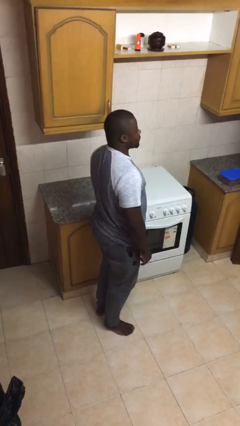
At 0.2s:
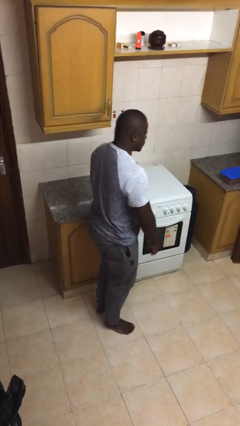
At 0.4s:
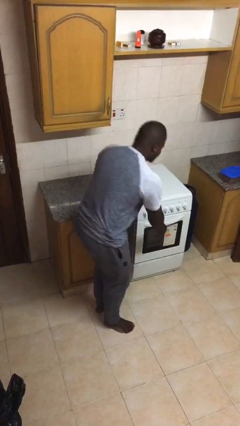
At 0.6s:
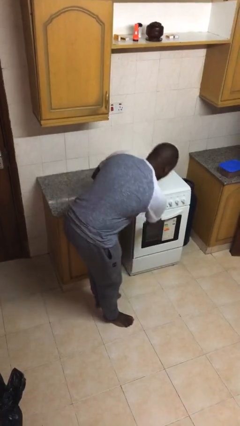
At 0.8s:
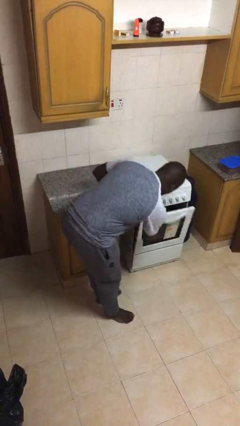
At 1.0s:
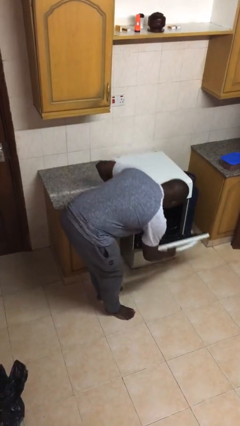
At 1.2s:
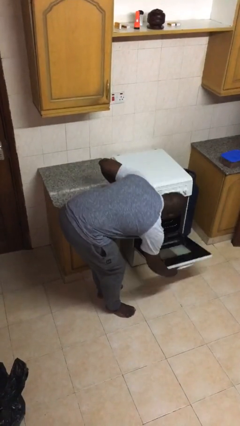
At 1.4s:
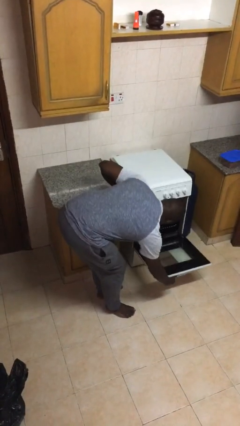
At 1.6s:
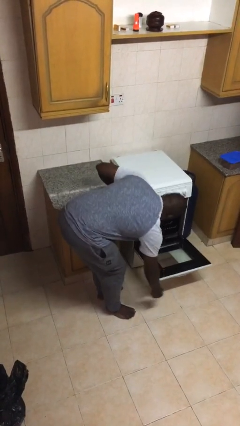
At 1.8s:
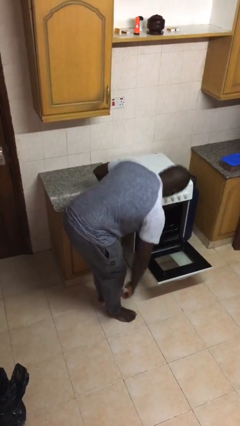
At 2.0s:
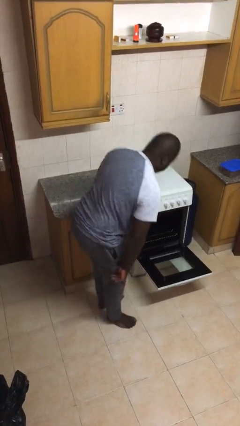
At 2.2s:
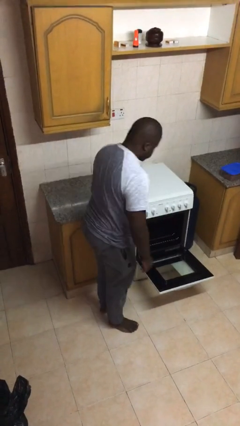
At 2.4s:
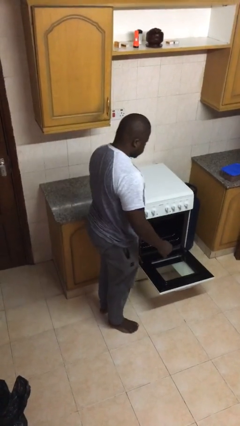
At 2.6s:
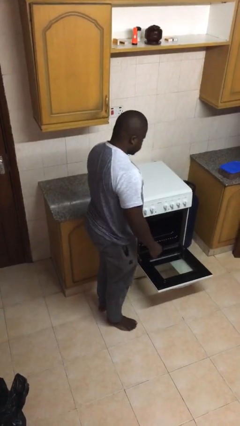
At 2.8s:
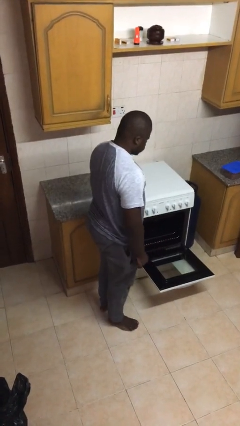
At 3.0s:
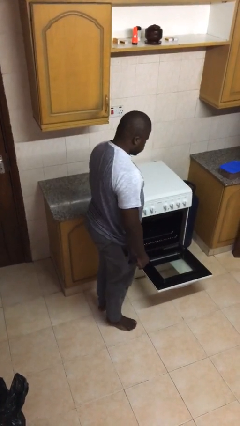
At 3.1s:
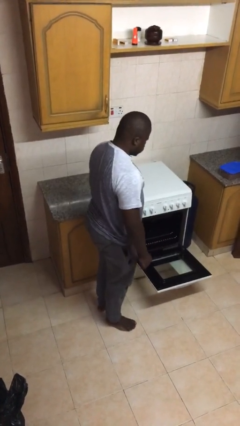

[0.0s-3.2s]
person opens oven door

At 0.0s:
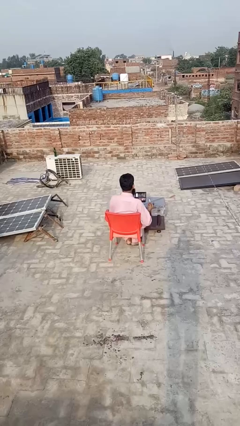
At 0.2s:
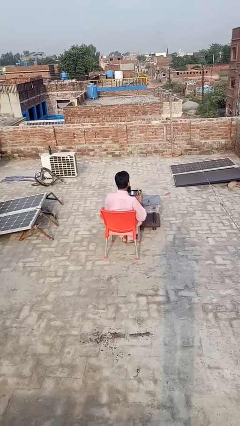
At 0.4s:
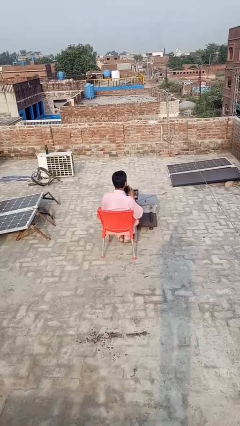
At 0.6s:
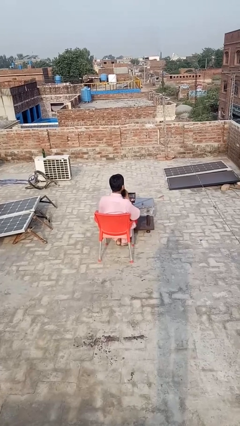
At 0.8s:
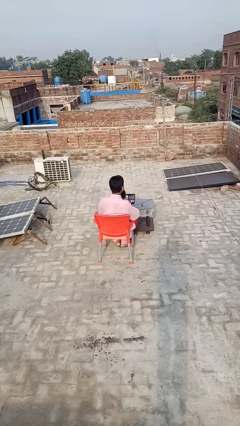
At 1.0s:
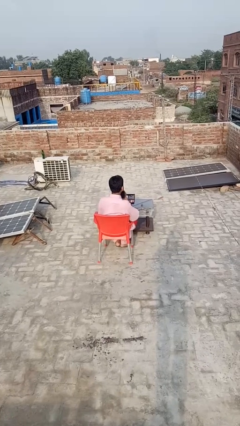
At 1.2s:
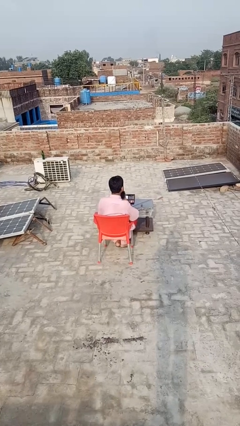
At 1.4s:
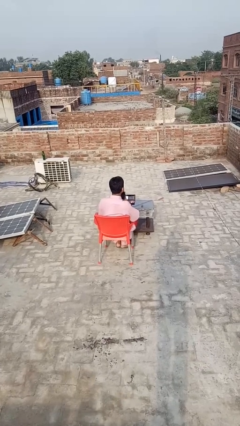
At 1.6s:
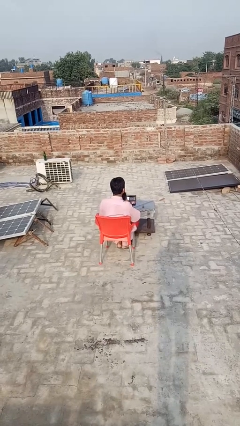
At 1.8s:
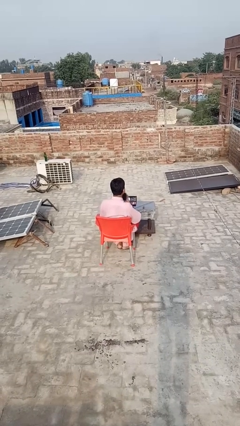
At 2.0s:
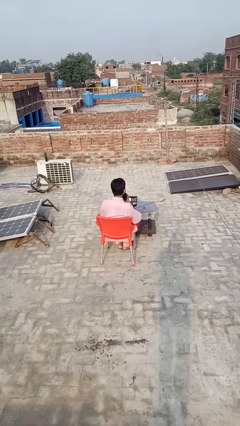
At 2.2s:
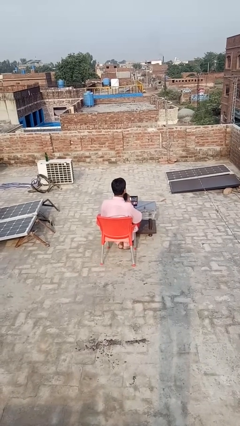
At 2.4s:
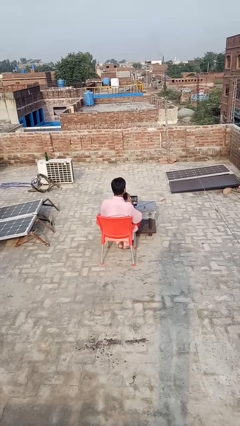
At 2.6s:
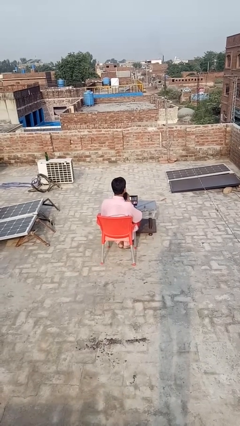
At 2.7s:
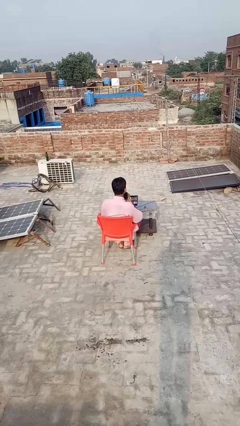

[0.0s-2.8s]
person applies lip makeup

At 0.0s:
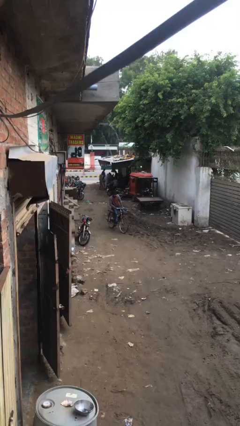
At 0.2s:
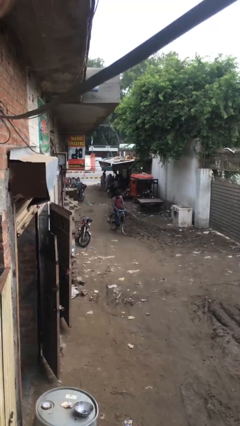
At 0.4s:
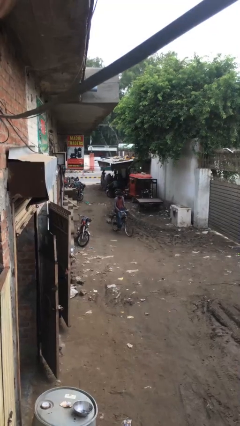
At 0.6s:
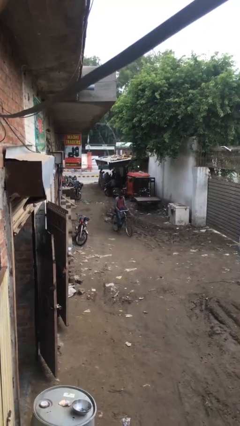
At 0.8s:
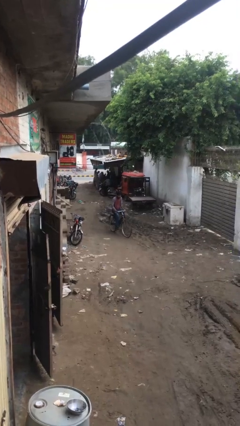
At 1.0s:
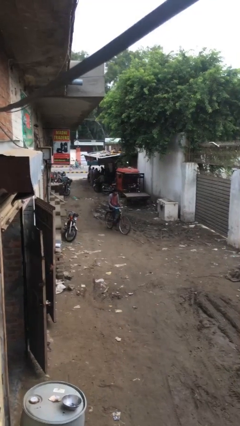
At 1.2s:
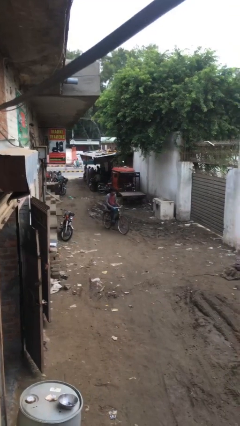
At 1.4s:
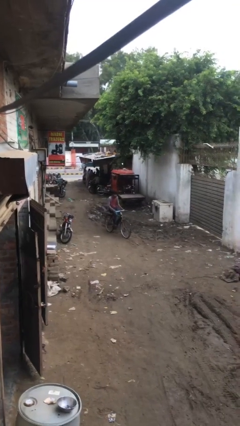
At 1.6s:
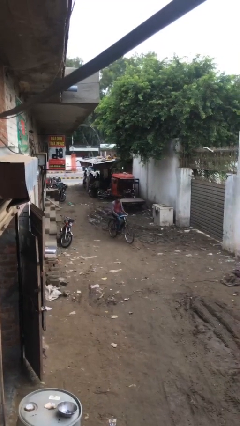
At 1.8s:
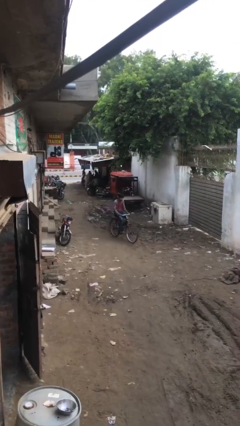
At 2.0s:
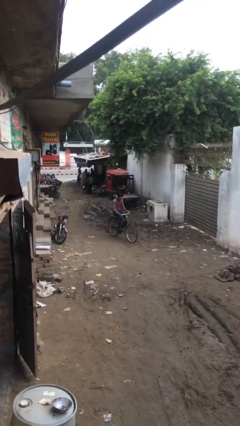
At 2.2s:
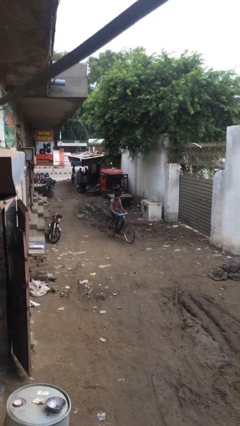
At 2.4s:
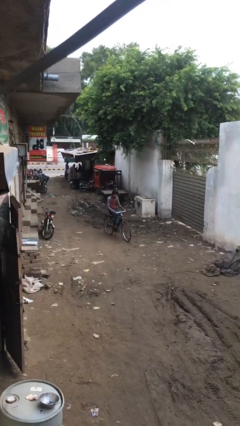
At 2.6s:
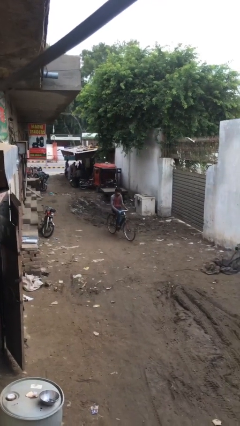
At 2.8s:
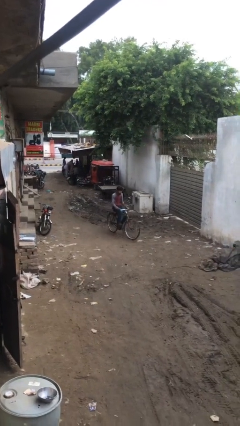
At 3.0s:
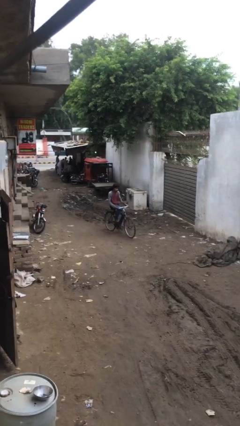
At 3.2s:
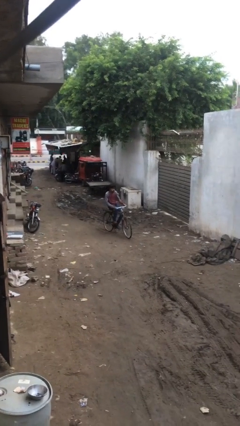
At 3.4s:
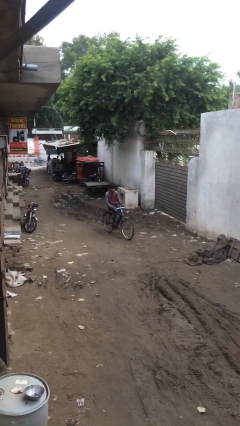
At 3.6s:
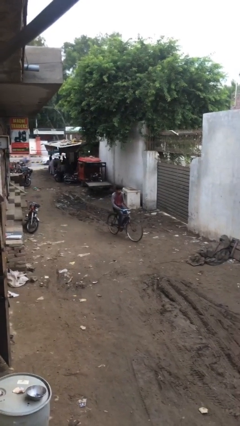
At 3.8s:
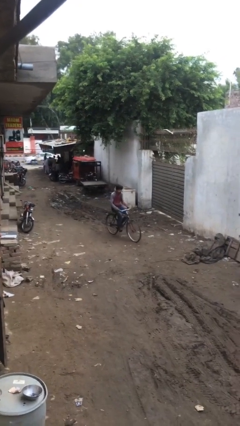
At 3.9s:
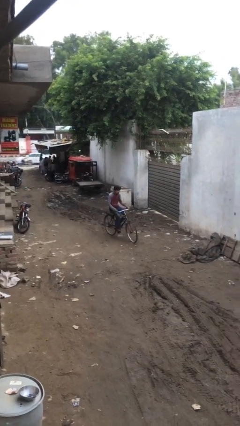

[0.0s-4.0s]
person rides bicycle

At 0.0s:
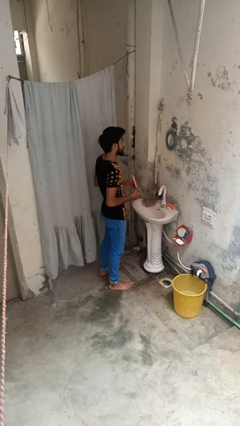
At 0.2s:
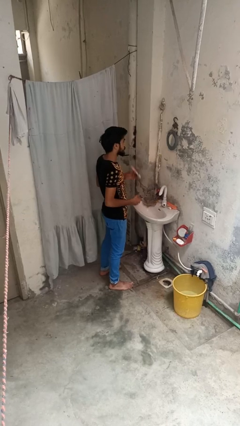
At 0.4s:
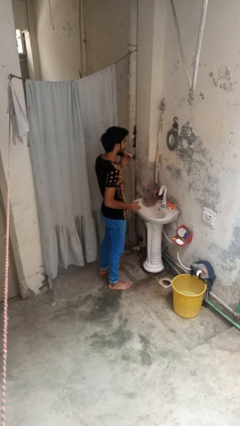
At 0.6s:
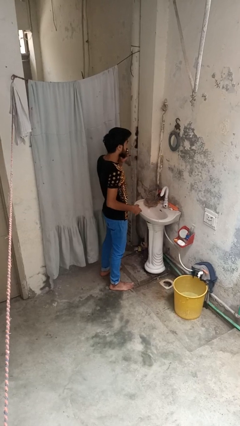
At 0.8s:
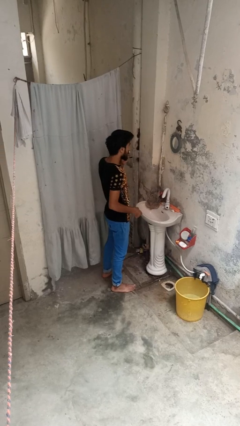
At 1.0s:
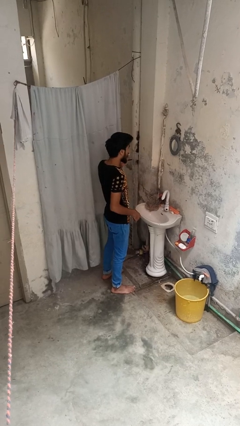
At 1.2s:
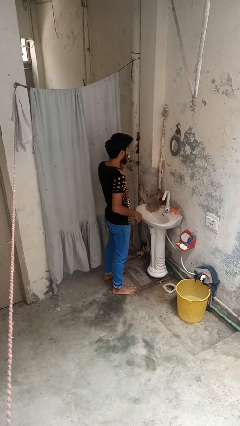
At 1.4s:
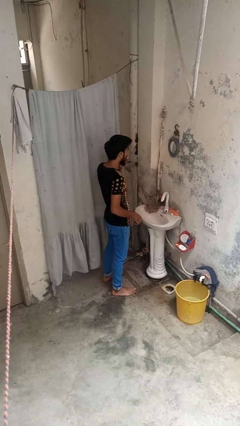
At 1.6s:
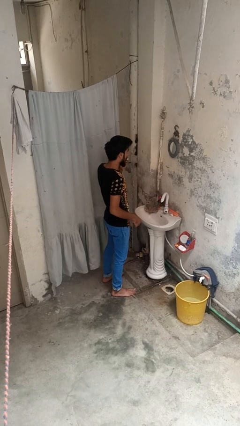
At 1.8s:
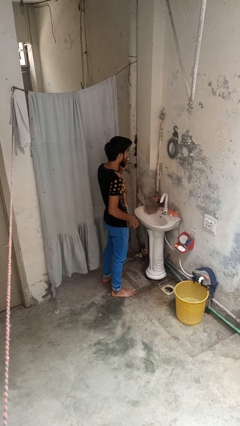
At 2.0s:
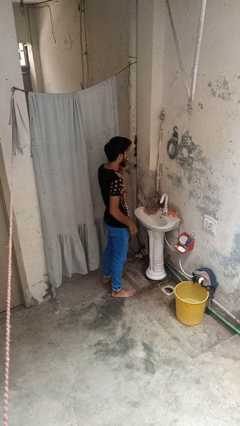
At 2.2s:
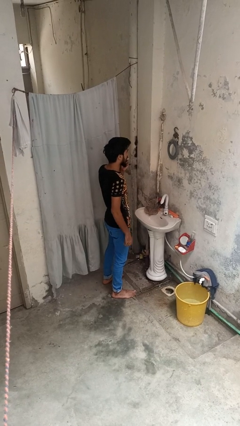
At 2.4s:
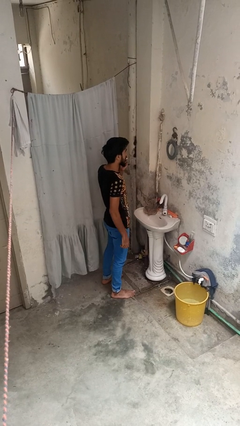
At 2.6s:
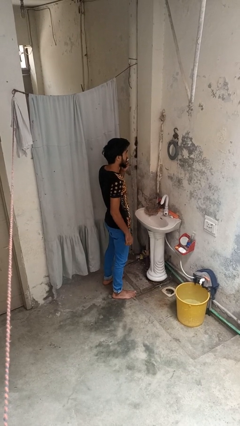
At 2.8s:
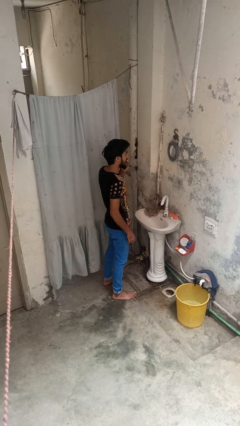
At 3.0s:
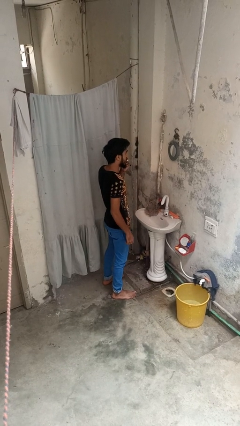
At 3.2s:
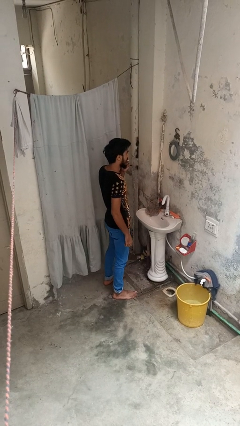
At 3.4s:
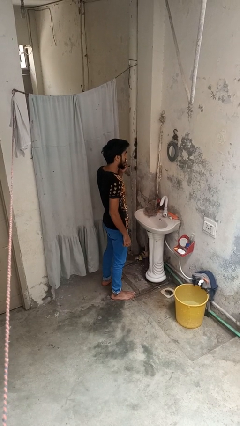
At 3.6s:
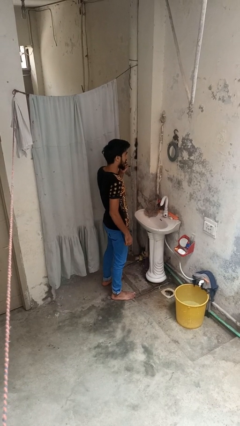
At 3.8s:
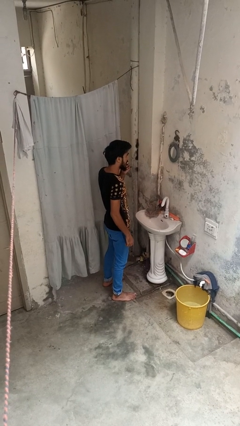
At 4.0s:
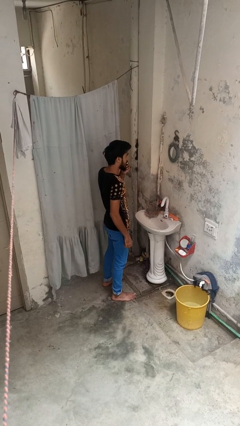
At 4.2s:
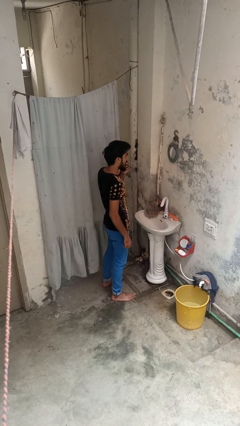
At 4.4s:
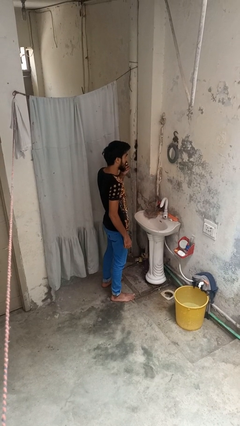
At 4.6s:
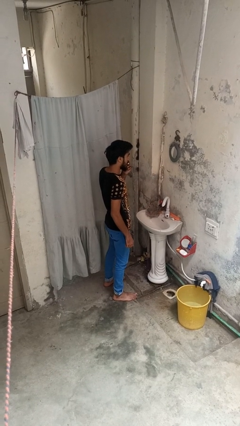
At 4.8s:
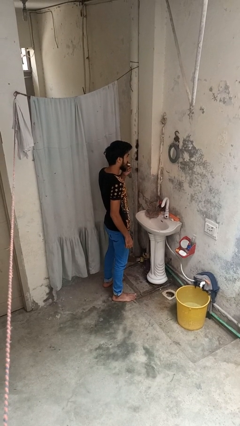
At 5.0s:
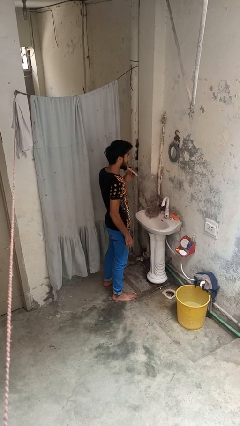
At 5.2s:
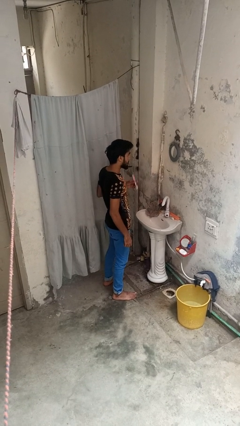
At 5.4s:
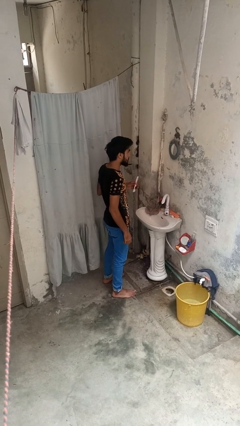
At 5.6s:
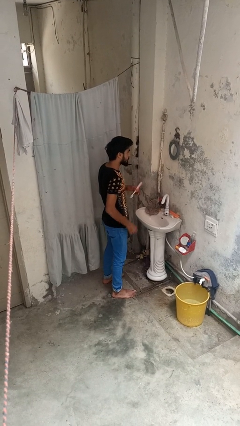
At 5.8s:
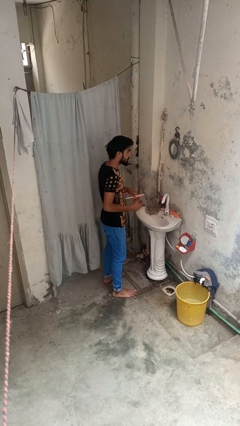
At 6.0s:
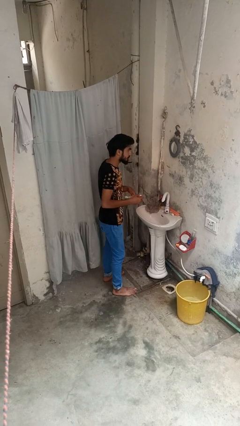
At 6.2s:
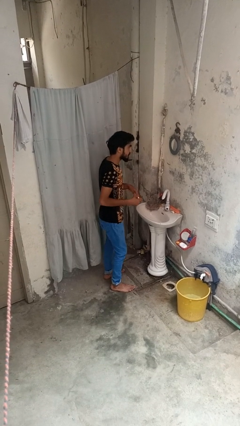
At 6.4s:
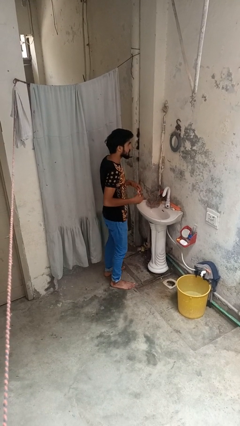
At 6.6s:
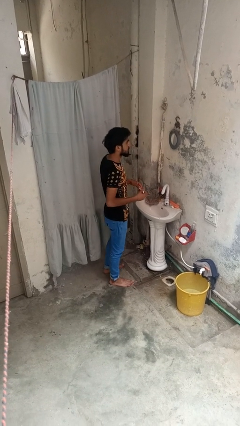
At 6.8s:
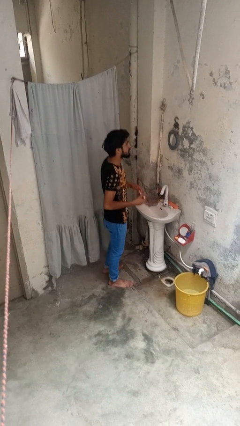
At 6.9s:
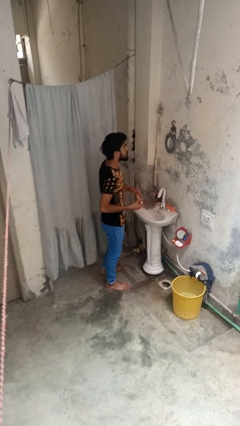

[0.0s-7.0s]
person brushes teeth

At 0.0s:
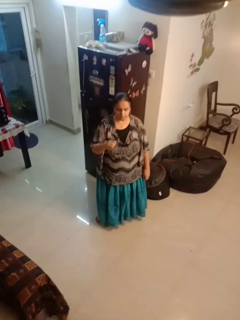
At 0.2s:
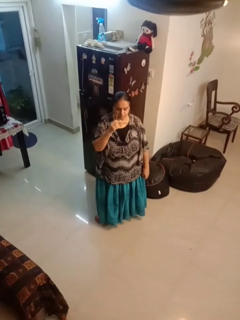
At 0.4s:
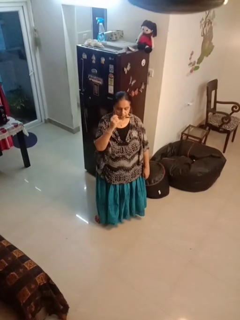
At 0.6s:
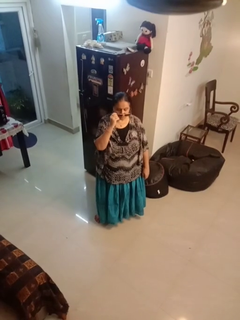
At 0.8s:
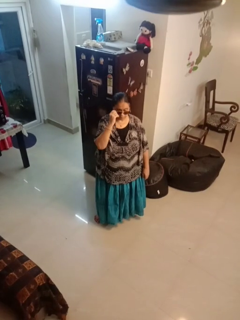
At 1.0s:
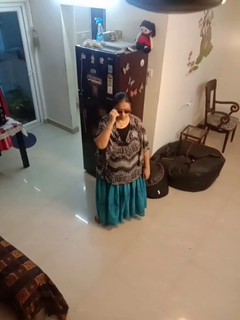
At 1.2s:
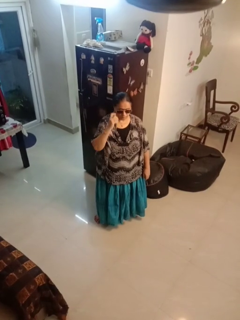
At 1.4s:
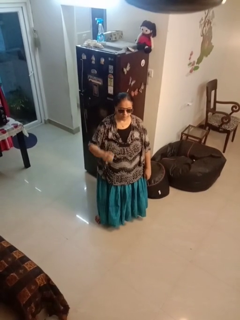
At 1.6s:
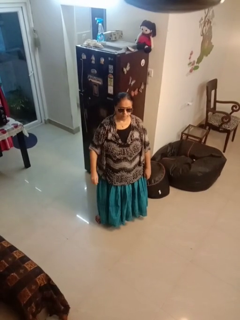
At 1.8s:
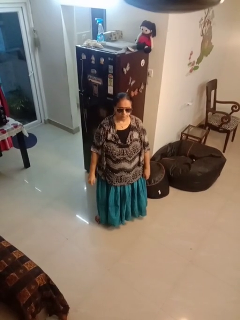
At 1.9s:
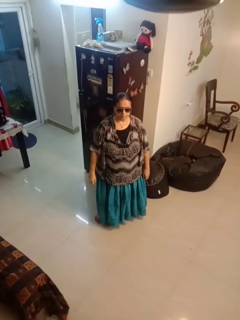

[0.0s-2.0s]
person puts on sunglasses
